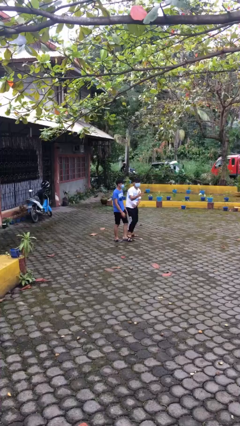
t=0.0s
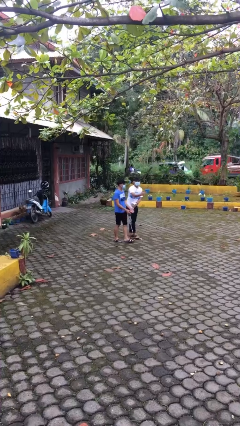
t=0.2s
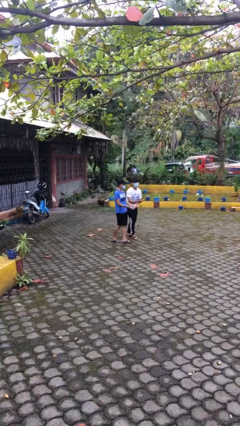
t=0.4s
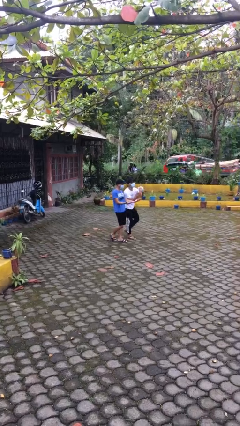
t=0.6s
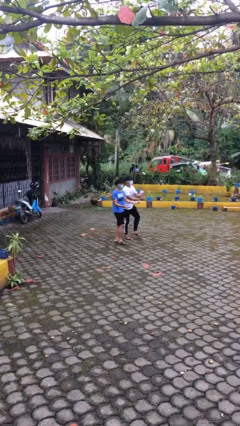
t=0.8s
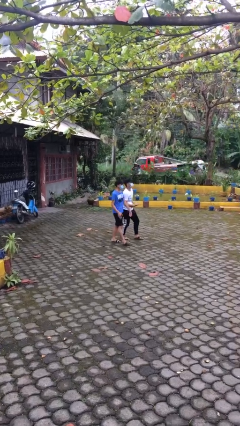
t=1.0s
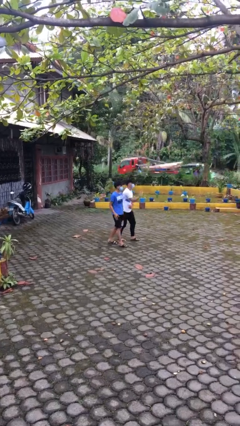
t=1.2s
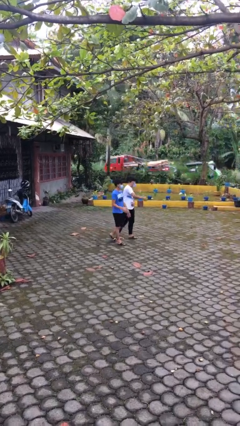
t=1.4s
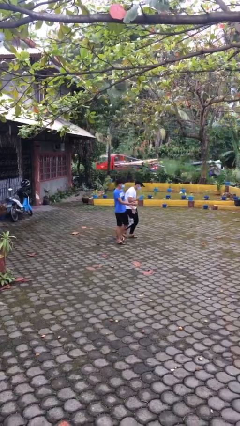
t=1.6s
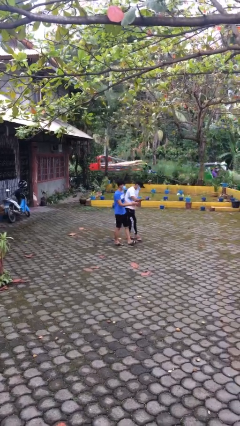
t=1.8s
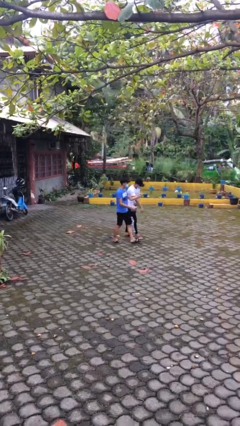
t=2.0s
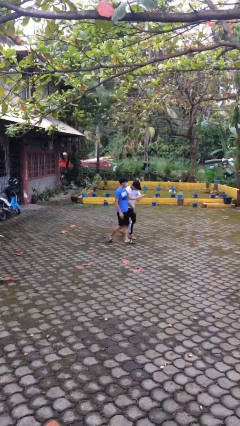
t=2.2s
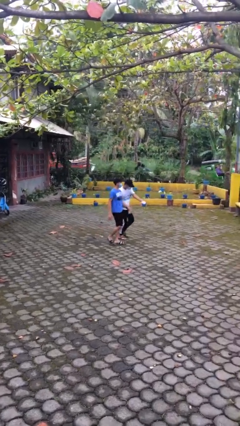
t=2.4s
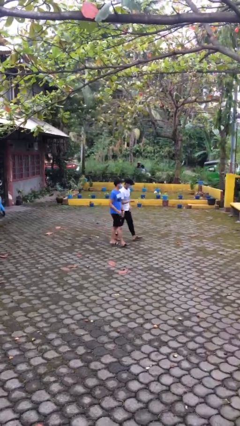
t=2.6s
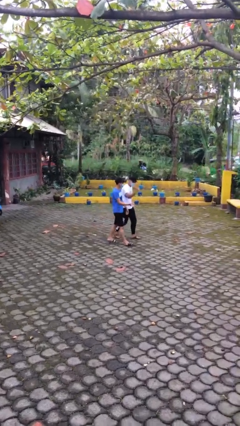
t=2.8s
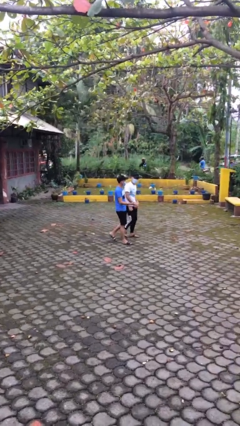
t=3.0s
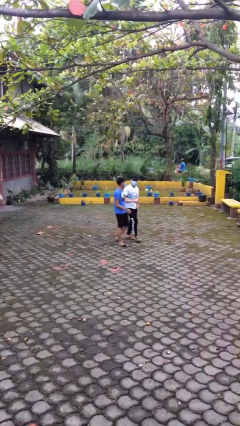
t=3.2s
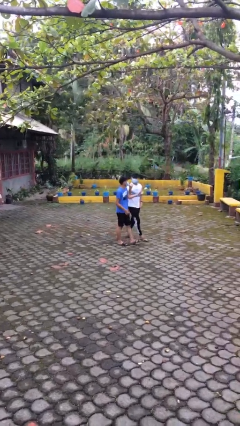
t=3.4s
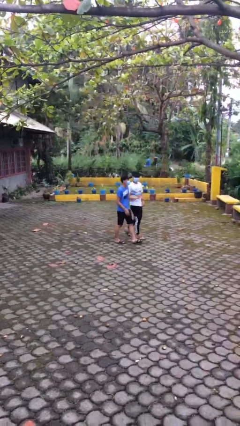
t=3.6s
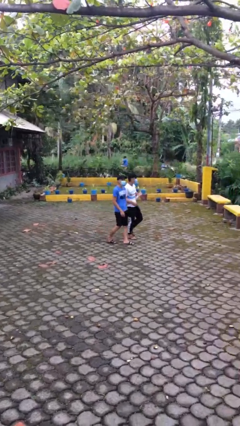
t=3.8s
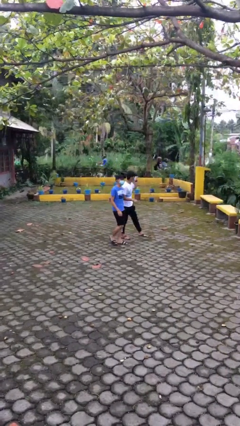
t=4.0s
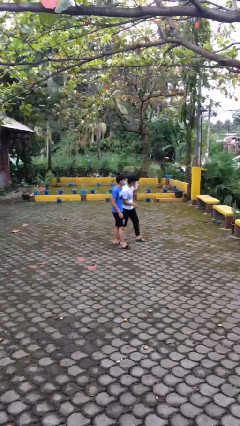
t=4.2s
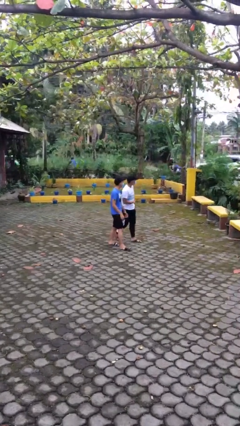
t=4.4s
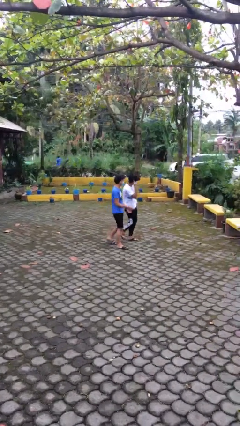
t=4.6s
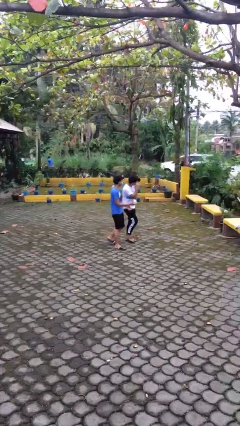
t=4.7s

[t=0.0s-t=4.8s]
person talks to person

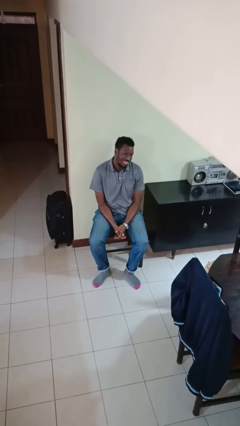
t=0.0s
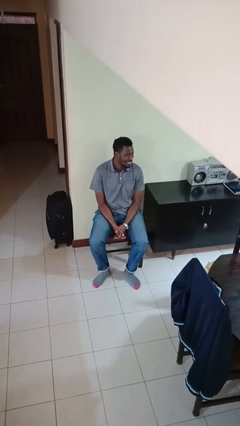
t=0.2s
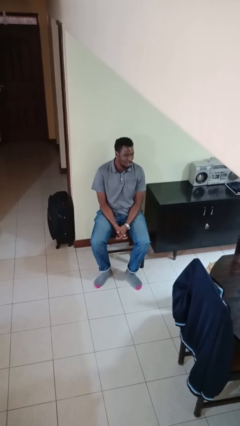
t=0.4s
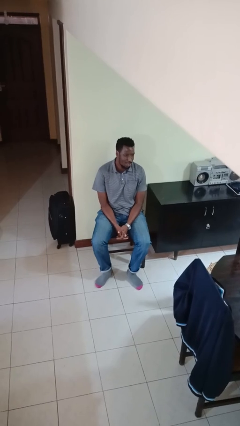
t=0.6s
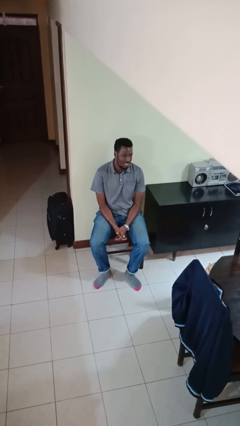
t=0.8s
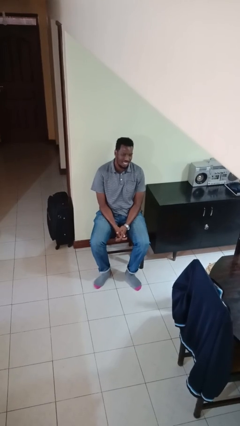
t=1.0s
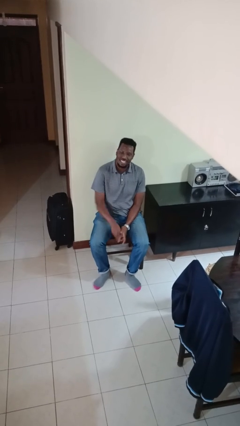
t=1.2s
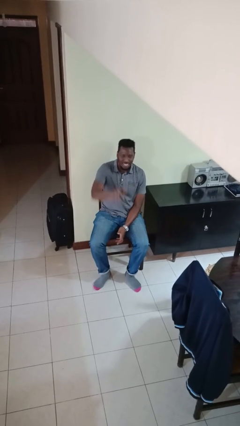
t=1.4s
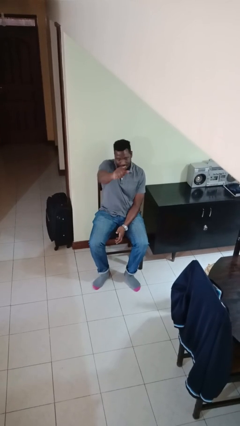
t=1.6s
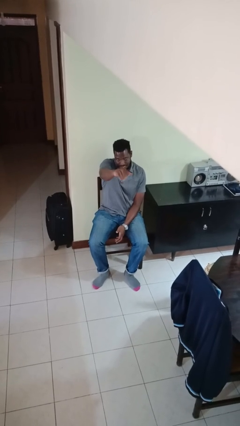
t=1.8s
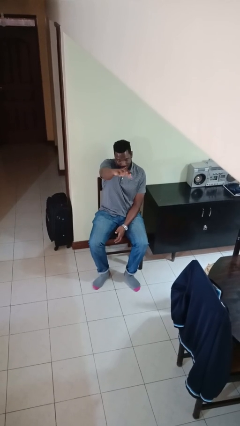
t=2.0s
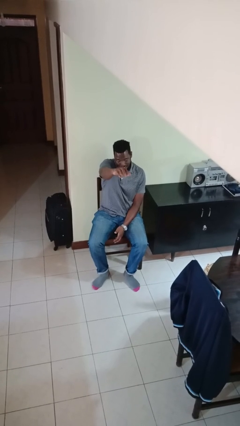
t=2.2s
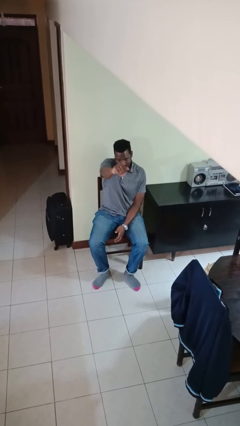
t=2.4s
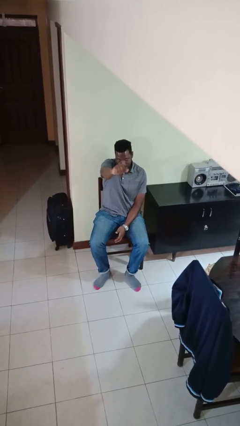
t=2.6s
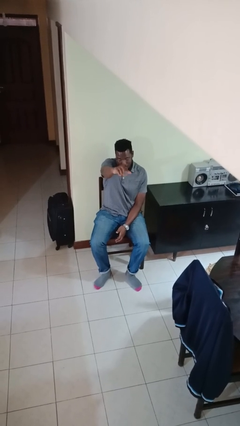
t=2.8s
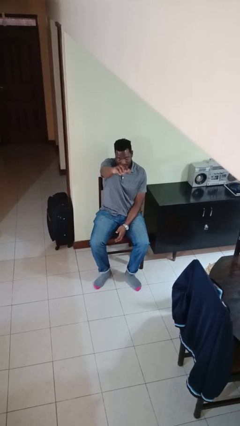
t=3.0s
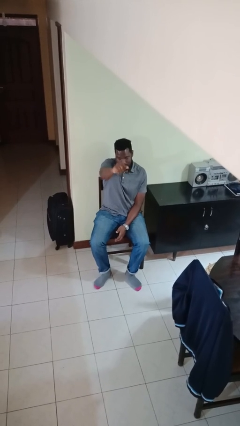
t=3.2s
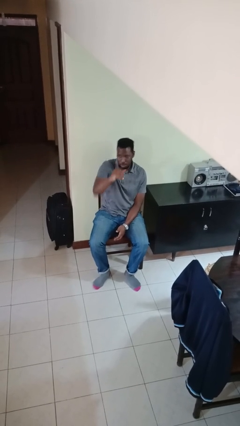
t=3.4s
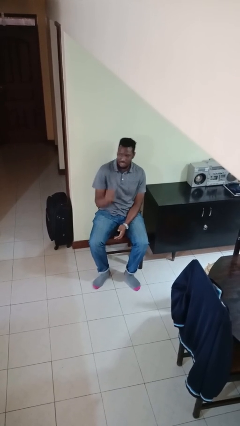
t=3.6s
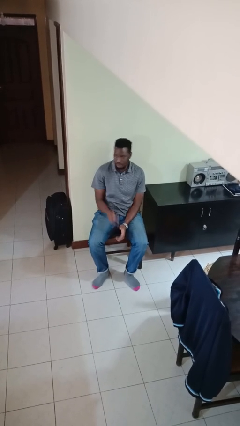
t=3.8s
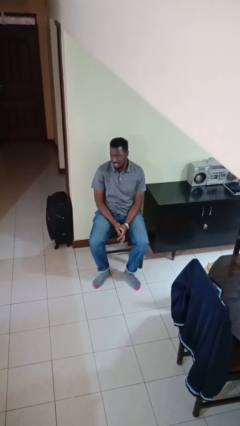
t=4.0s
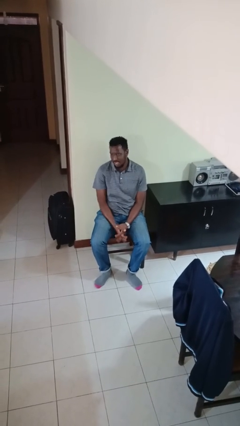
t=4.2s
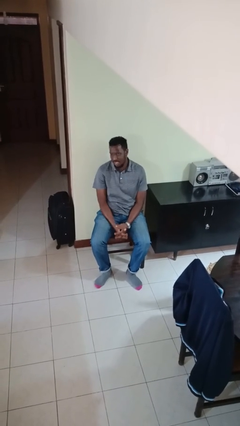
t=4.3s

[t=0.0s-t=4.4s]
person gestures come here

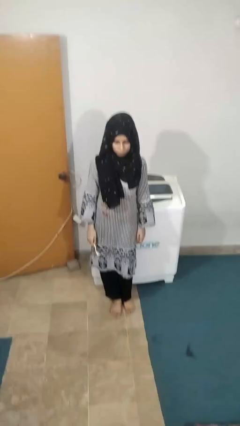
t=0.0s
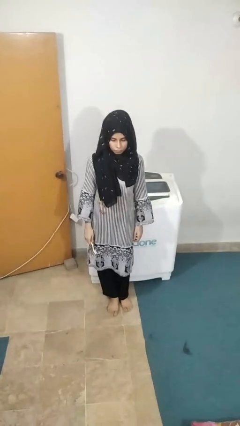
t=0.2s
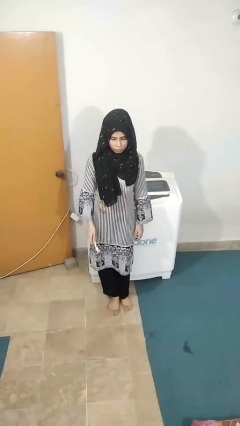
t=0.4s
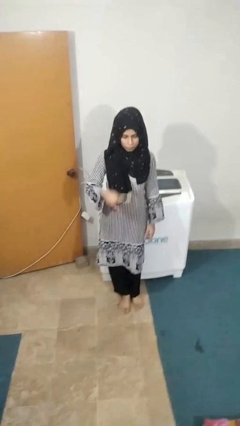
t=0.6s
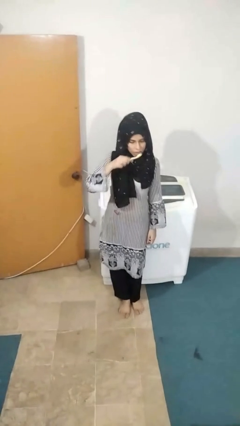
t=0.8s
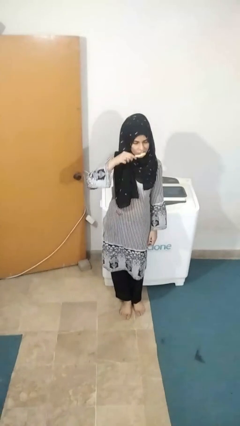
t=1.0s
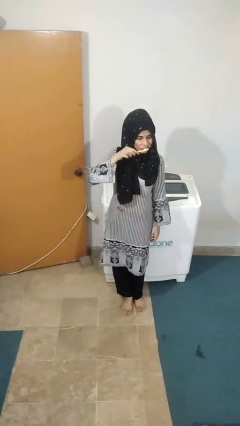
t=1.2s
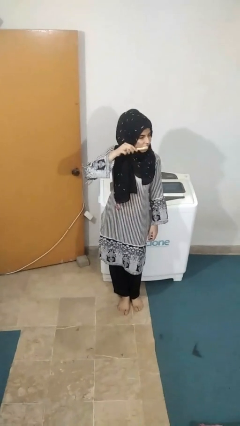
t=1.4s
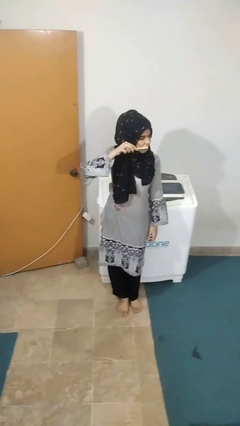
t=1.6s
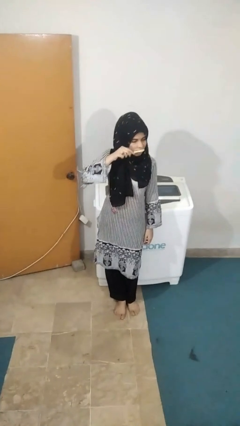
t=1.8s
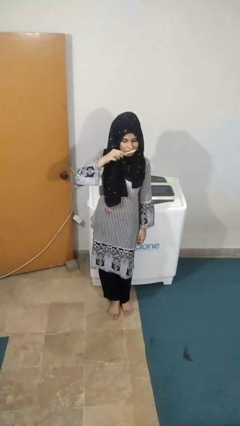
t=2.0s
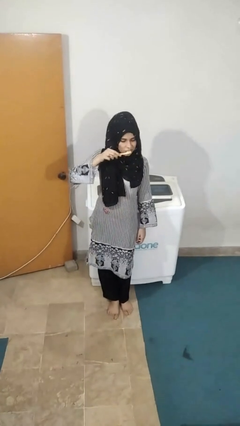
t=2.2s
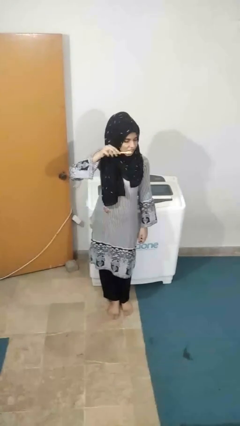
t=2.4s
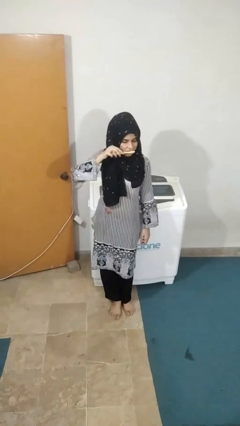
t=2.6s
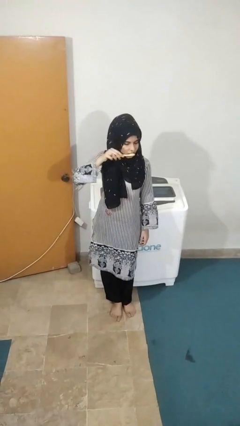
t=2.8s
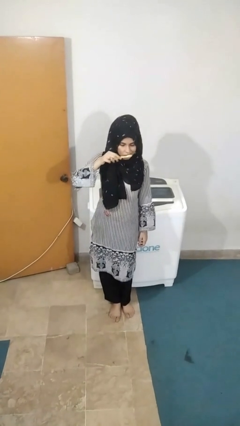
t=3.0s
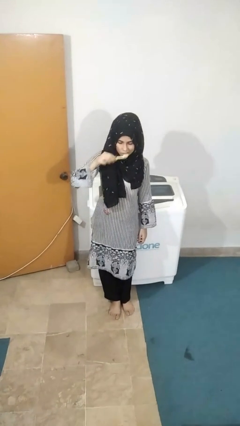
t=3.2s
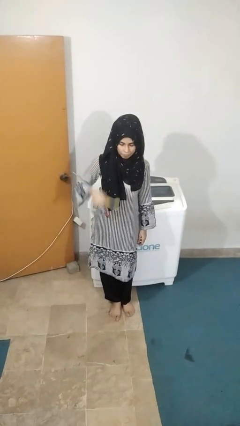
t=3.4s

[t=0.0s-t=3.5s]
person brushes teeth

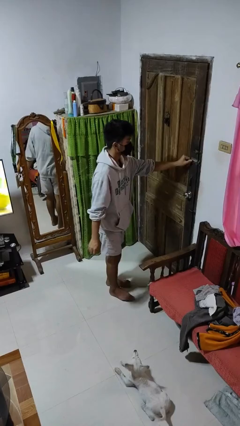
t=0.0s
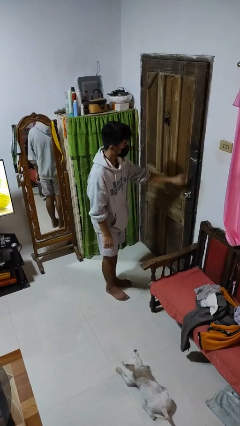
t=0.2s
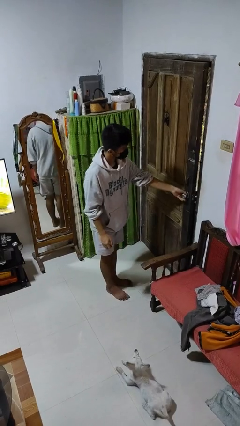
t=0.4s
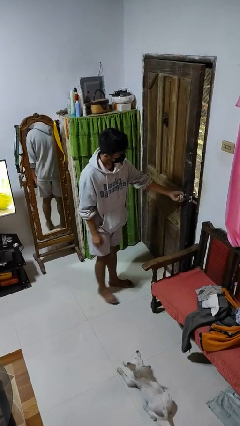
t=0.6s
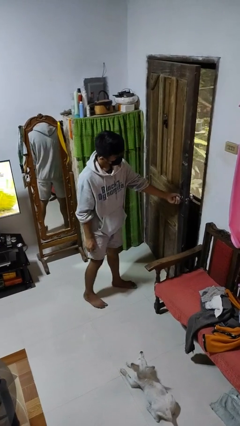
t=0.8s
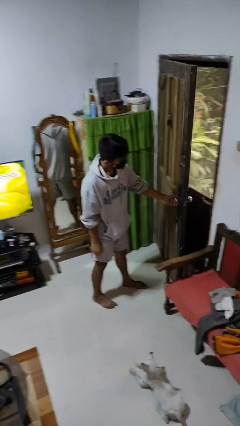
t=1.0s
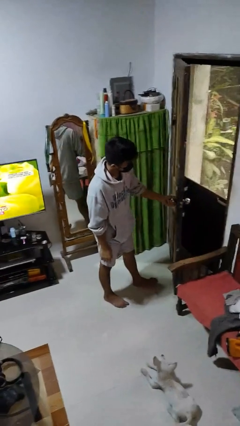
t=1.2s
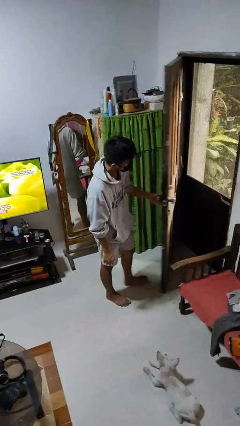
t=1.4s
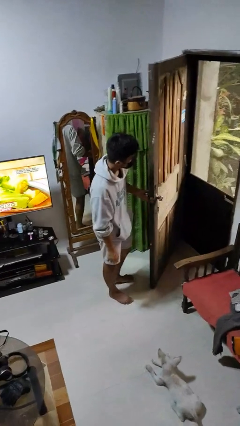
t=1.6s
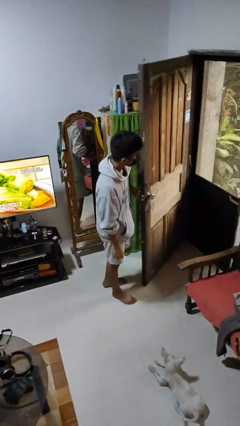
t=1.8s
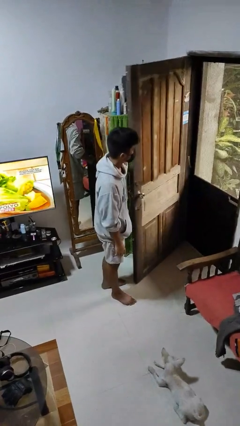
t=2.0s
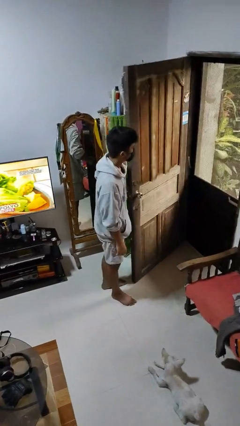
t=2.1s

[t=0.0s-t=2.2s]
person opens facility door

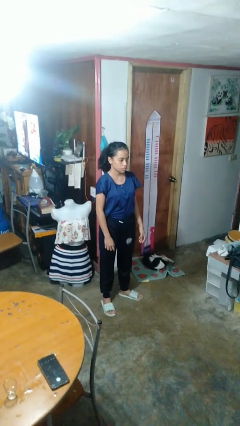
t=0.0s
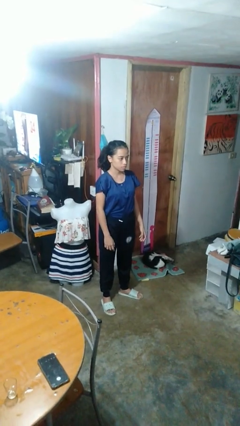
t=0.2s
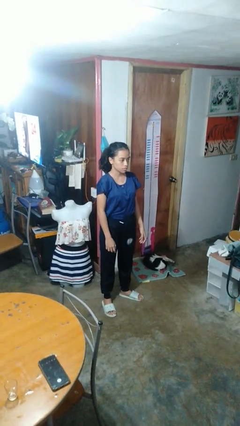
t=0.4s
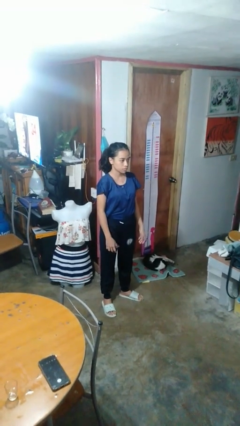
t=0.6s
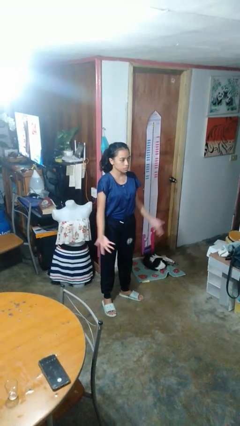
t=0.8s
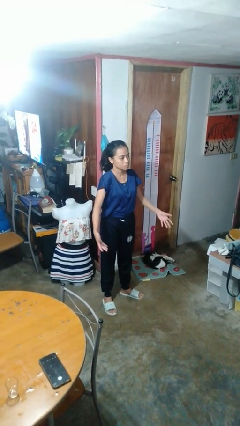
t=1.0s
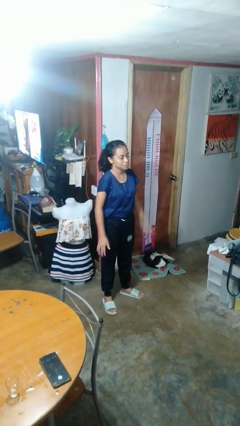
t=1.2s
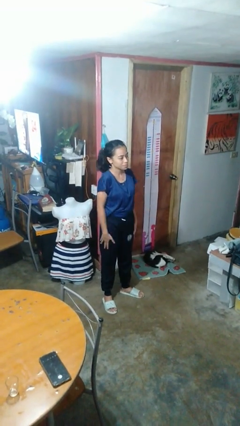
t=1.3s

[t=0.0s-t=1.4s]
person slaps hands on thighs

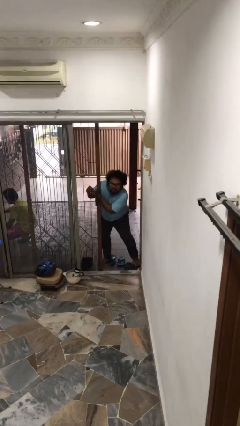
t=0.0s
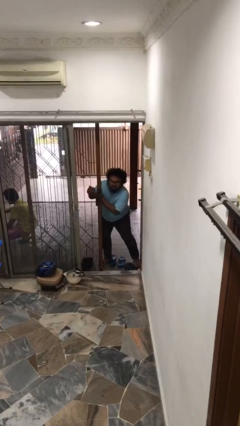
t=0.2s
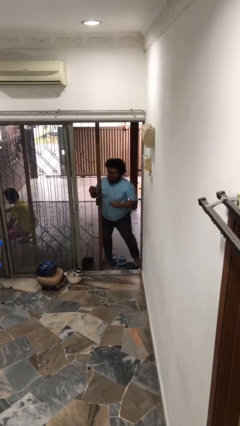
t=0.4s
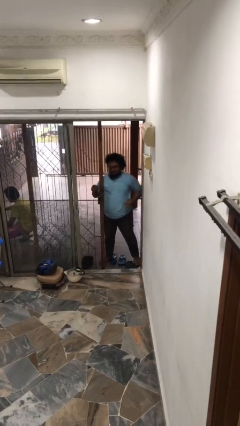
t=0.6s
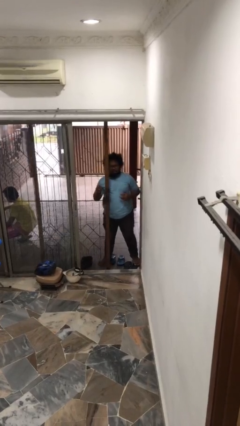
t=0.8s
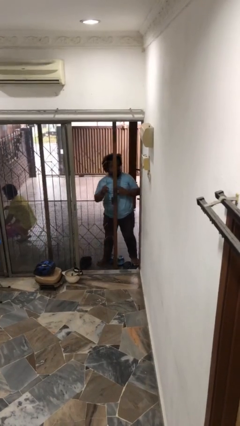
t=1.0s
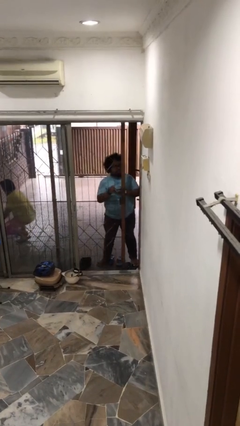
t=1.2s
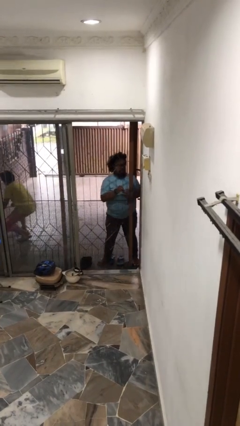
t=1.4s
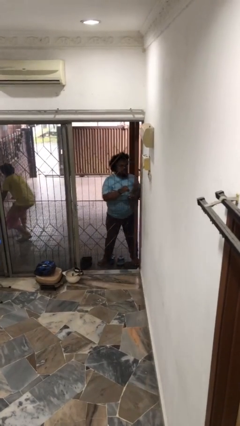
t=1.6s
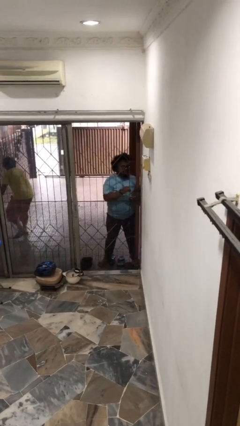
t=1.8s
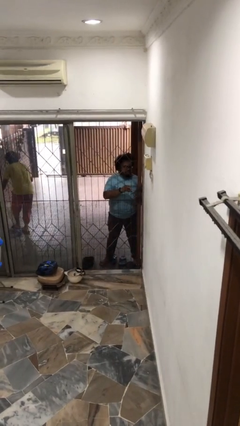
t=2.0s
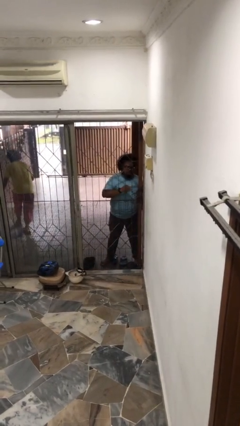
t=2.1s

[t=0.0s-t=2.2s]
person closes facility door
